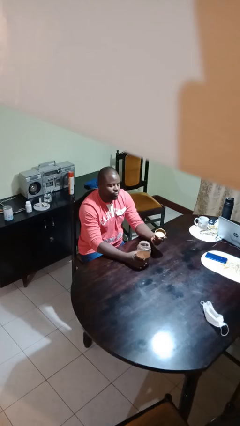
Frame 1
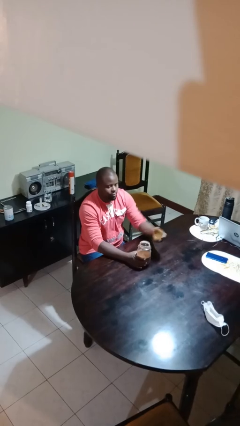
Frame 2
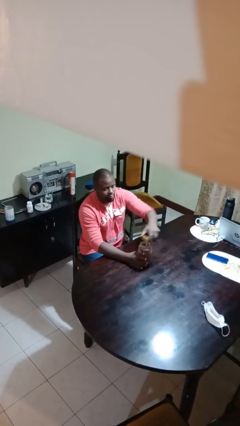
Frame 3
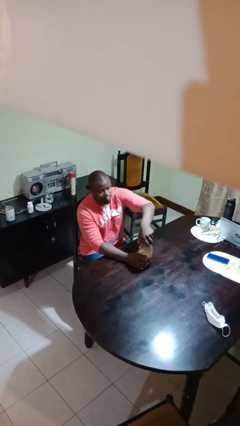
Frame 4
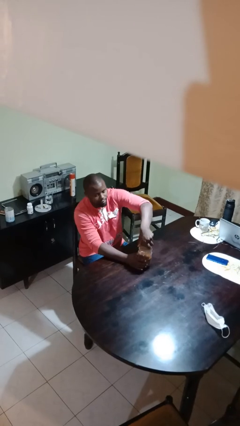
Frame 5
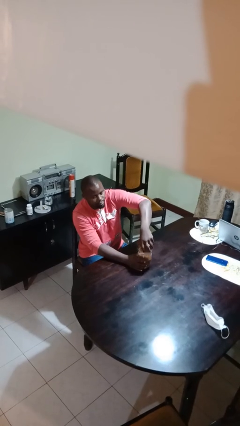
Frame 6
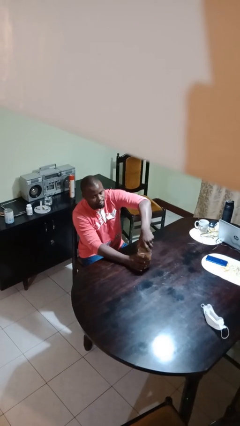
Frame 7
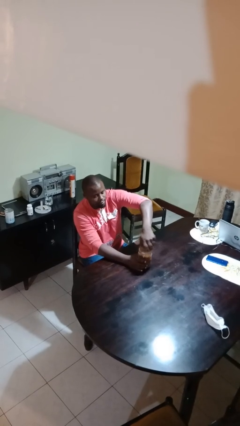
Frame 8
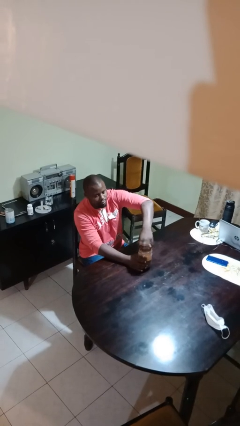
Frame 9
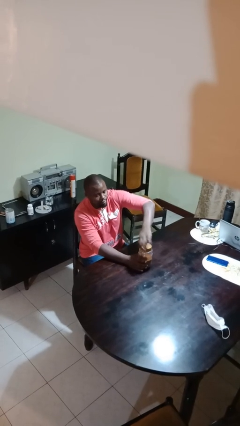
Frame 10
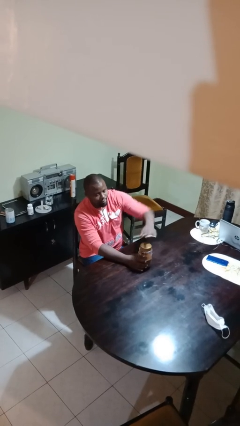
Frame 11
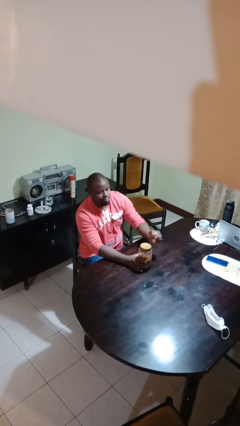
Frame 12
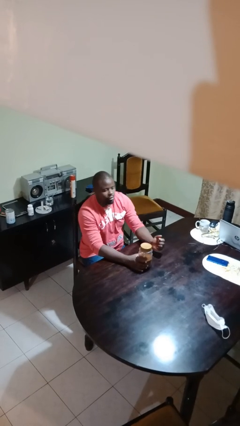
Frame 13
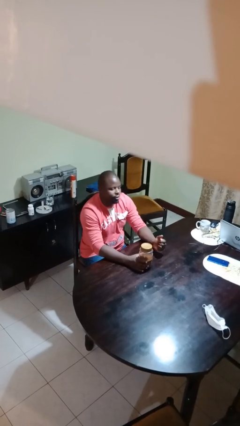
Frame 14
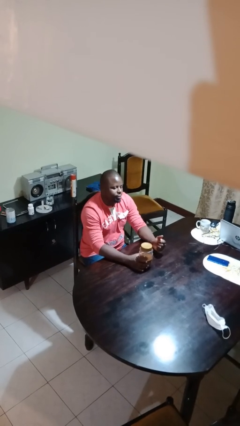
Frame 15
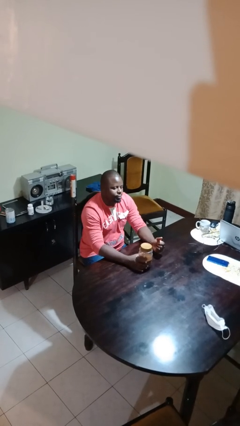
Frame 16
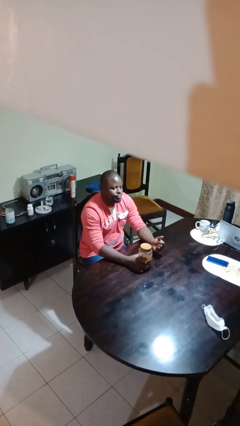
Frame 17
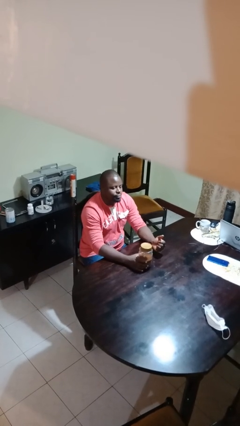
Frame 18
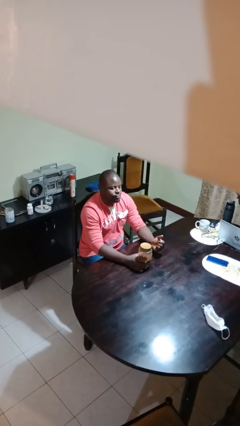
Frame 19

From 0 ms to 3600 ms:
person closes jar

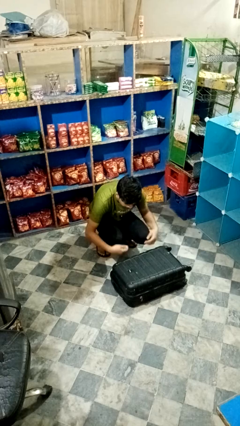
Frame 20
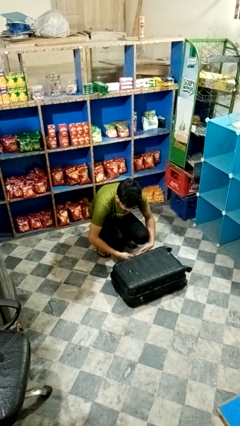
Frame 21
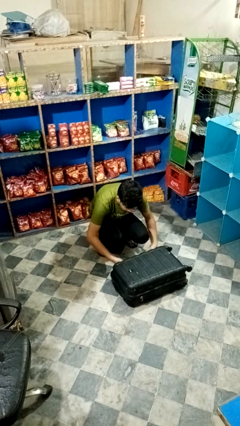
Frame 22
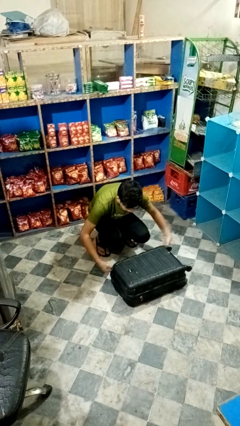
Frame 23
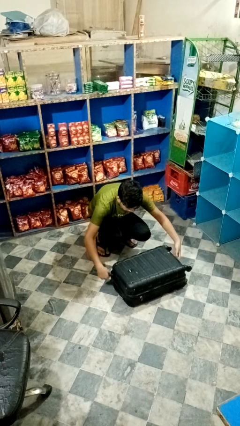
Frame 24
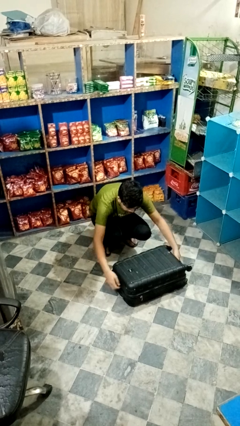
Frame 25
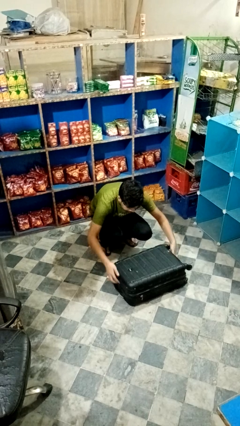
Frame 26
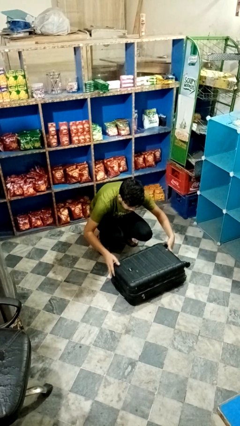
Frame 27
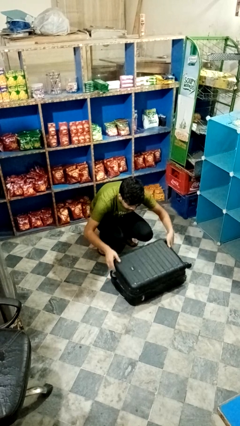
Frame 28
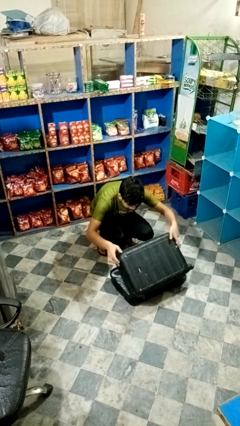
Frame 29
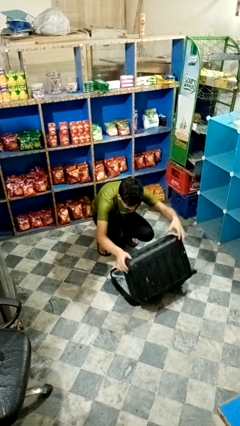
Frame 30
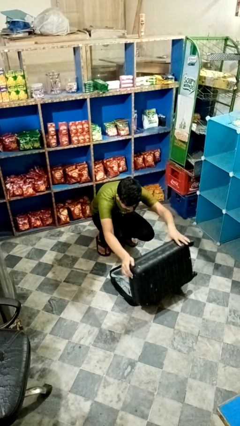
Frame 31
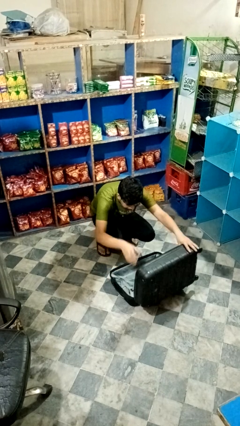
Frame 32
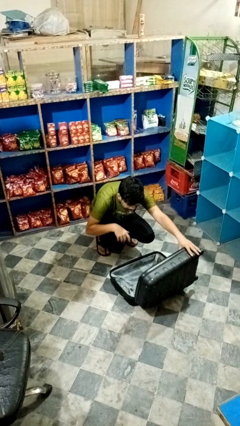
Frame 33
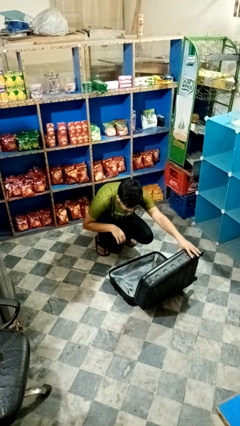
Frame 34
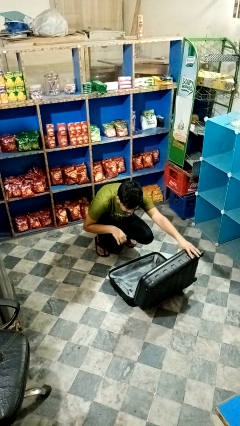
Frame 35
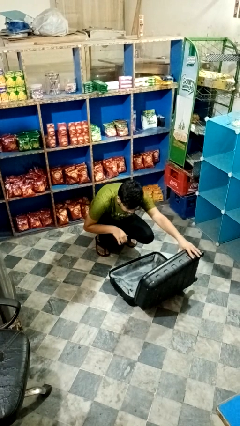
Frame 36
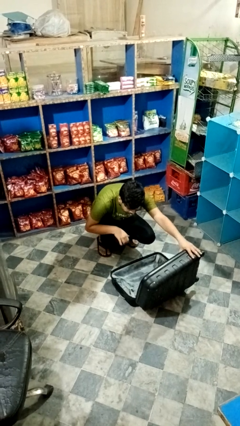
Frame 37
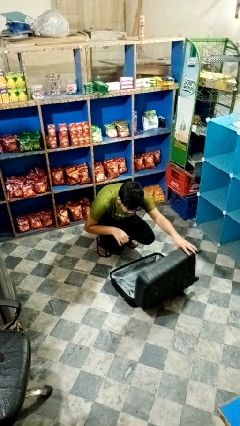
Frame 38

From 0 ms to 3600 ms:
person opens suitcase

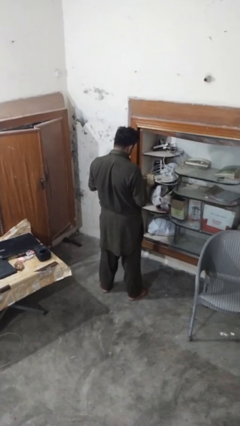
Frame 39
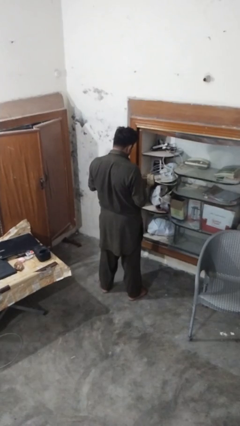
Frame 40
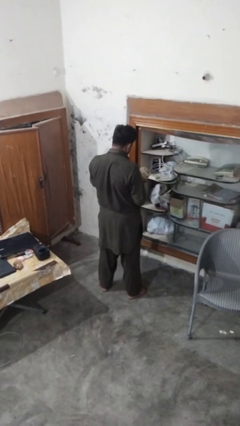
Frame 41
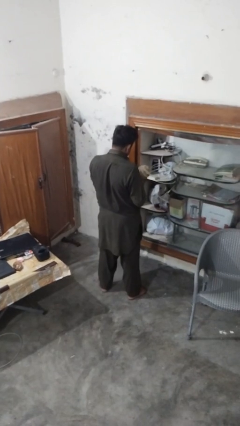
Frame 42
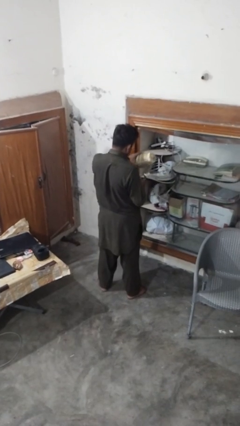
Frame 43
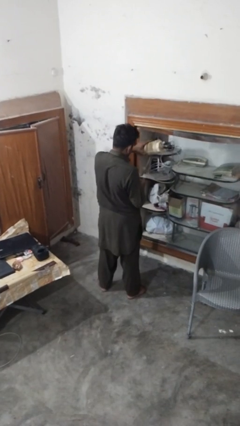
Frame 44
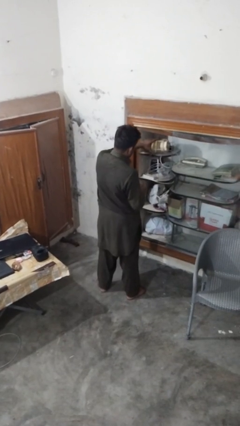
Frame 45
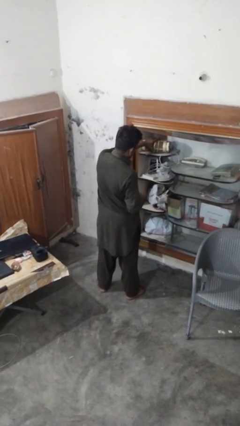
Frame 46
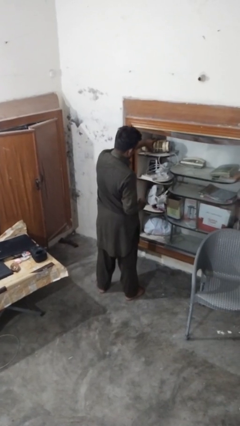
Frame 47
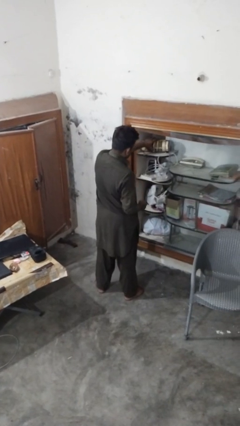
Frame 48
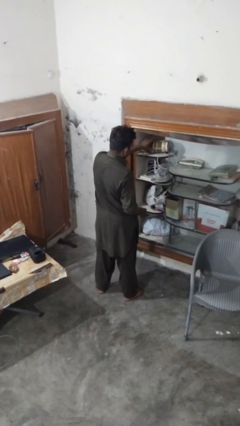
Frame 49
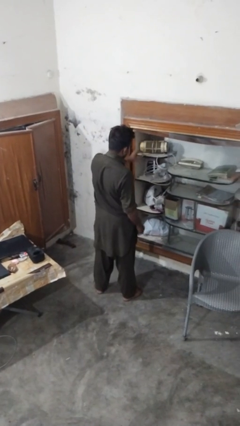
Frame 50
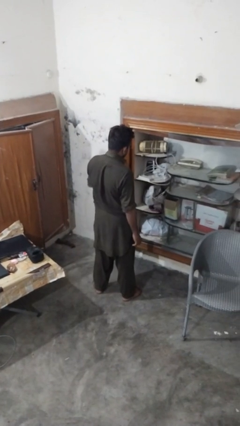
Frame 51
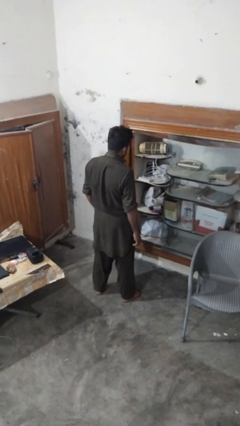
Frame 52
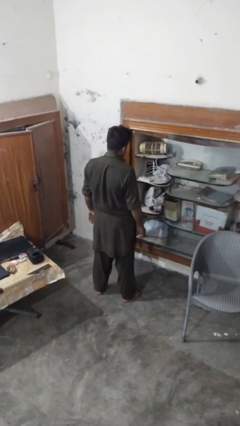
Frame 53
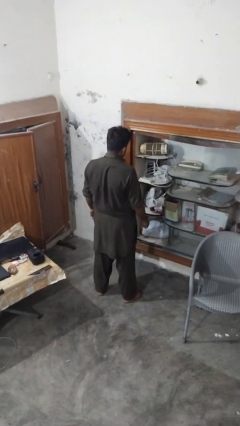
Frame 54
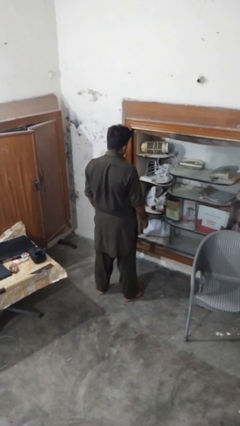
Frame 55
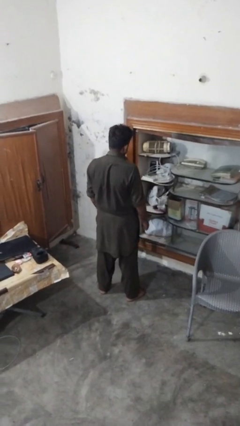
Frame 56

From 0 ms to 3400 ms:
person puts down object on countertop

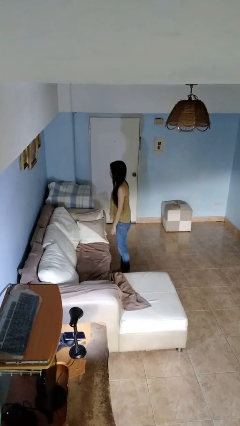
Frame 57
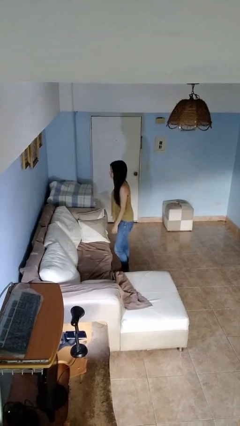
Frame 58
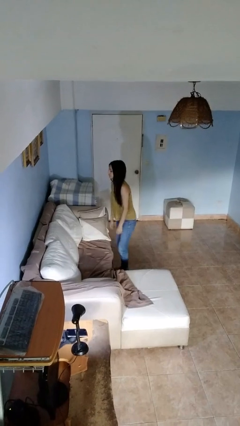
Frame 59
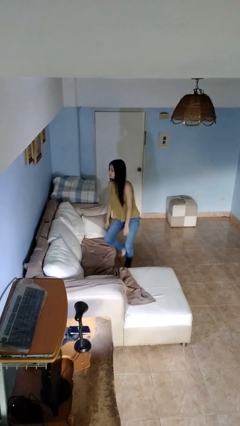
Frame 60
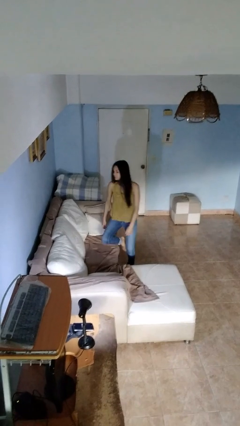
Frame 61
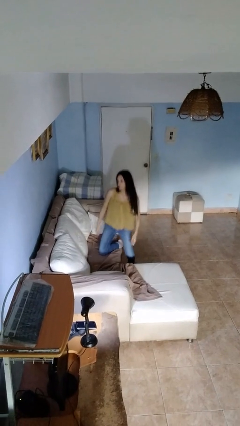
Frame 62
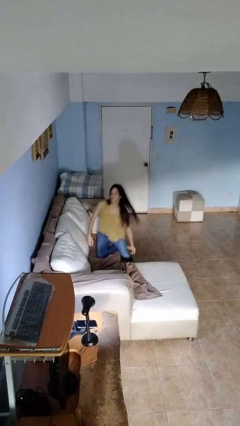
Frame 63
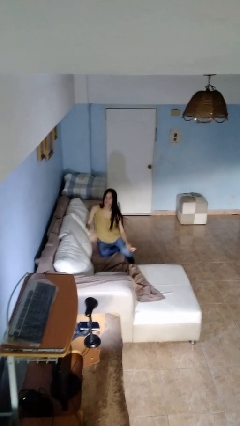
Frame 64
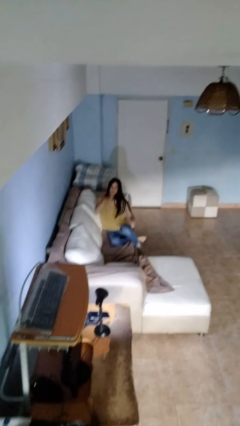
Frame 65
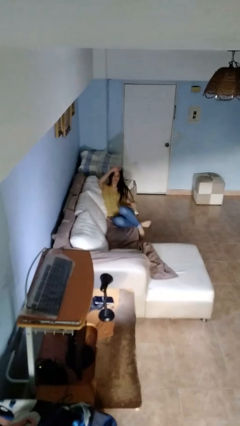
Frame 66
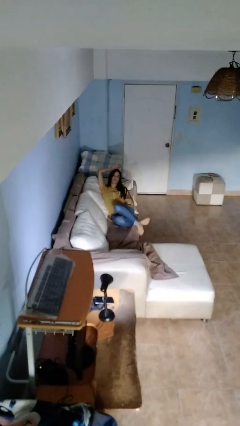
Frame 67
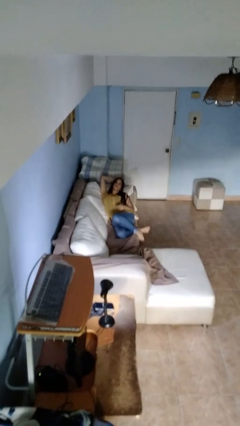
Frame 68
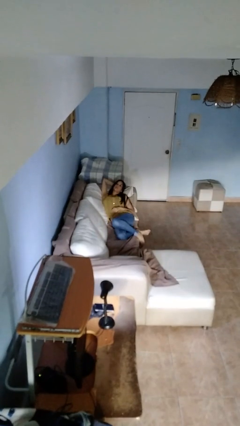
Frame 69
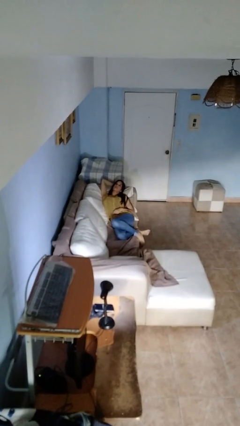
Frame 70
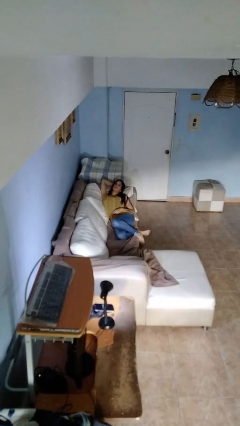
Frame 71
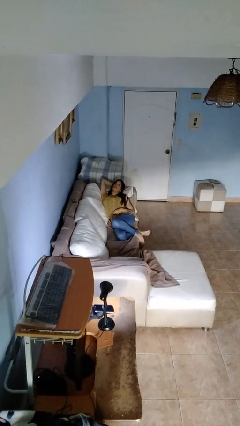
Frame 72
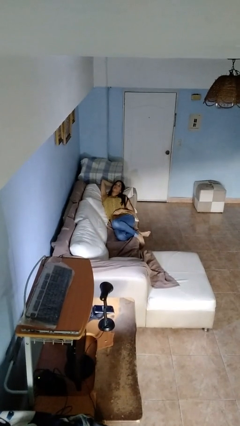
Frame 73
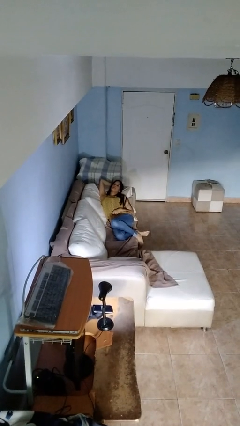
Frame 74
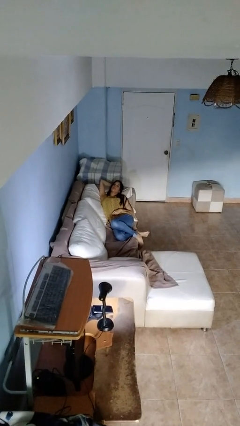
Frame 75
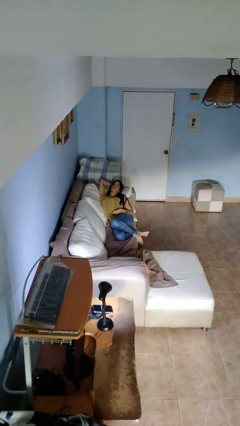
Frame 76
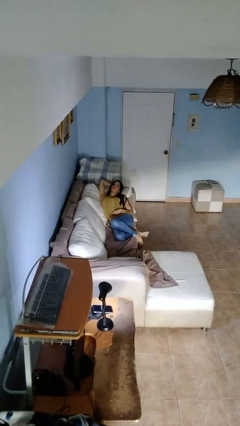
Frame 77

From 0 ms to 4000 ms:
person lies down on couch

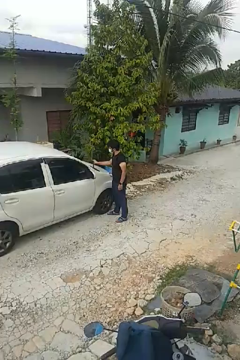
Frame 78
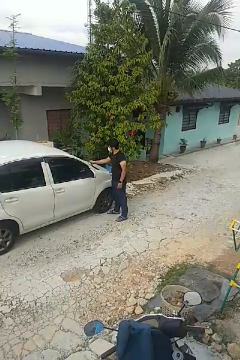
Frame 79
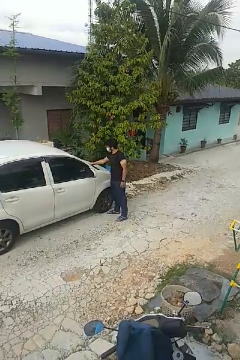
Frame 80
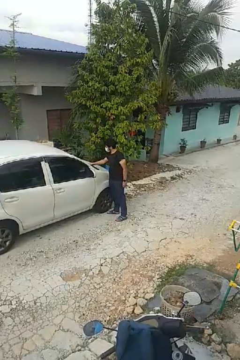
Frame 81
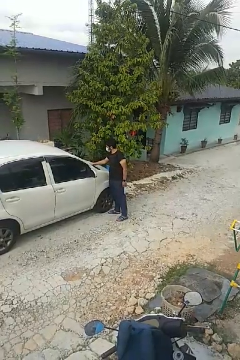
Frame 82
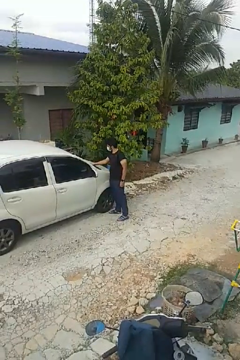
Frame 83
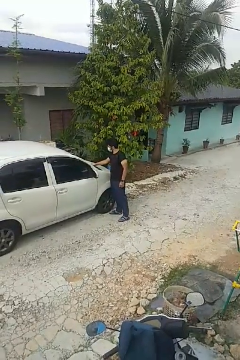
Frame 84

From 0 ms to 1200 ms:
person flips down car wipers

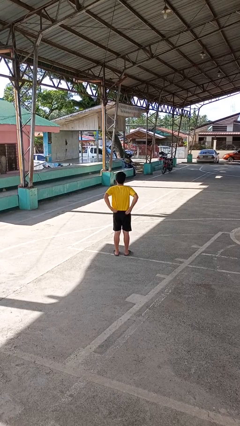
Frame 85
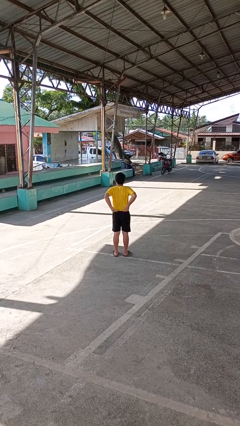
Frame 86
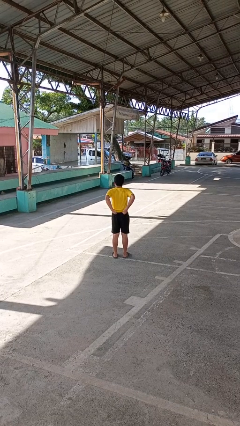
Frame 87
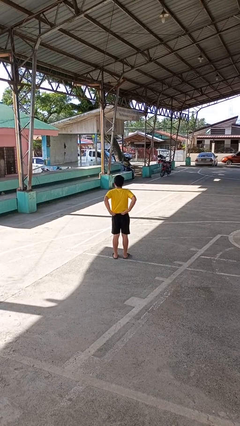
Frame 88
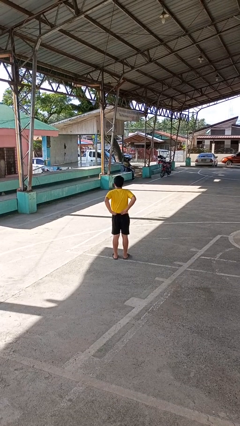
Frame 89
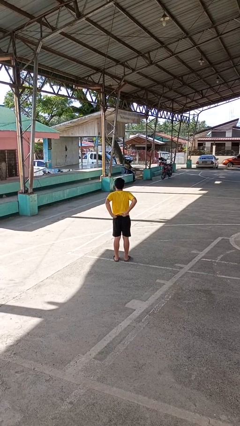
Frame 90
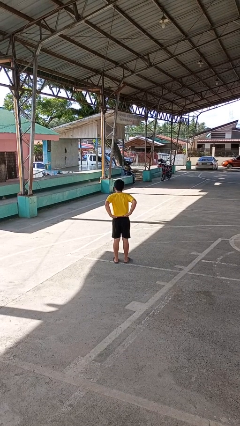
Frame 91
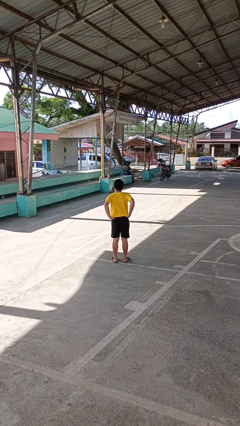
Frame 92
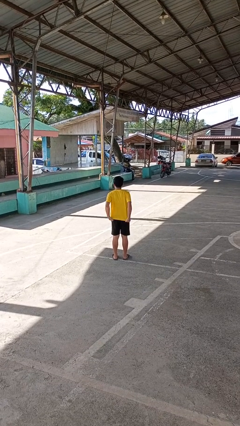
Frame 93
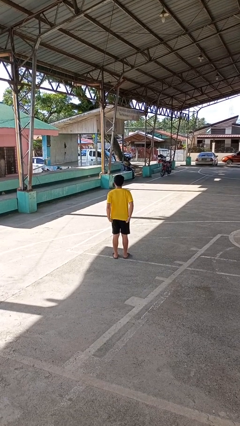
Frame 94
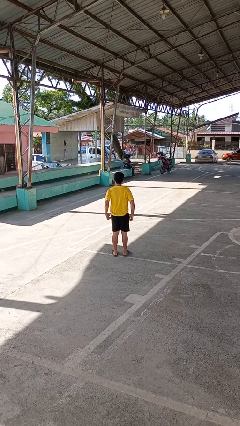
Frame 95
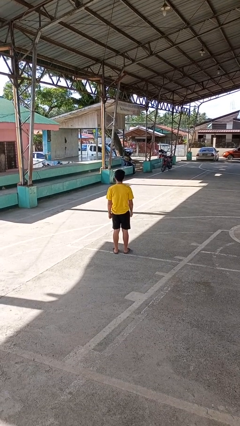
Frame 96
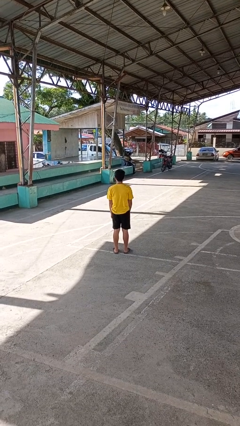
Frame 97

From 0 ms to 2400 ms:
person untucks shirt
